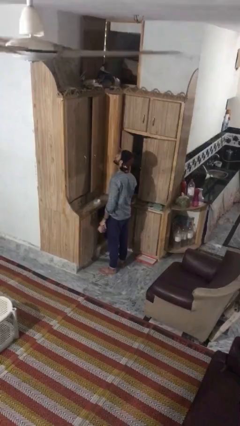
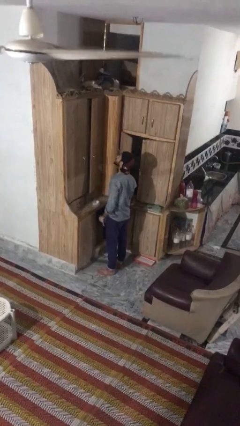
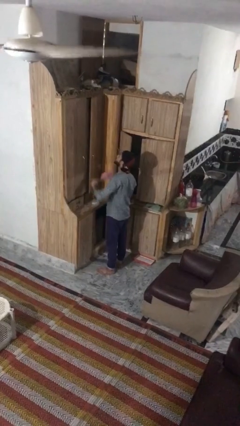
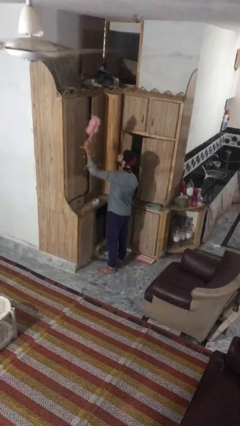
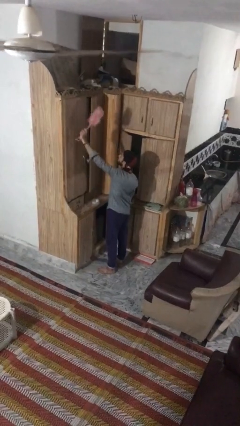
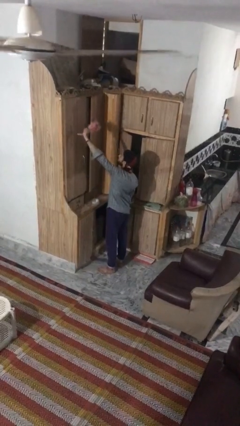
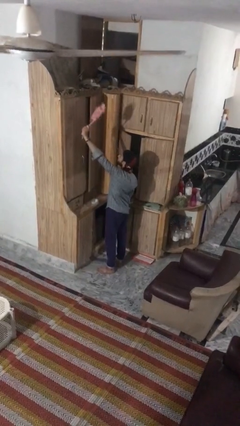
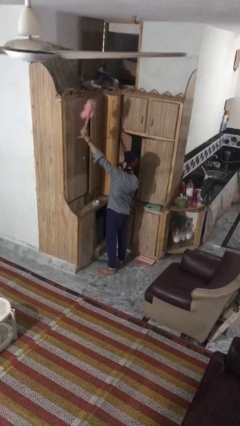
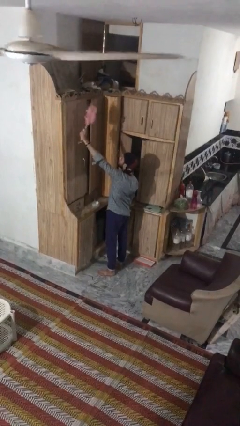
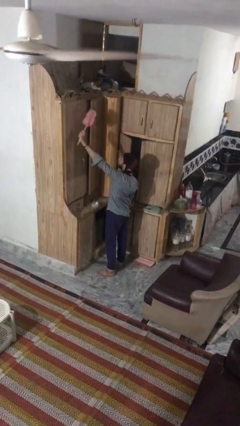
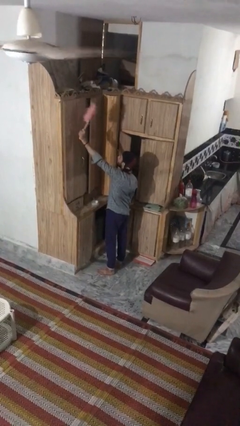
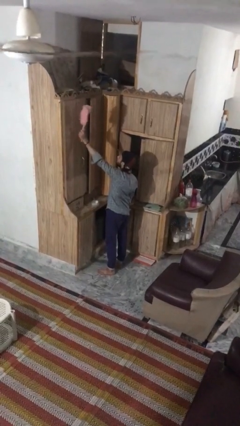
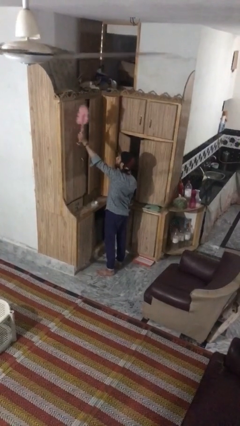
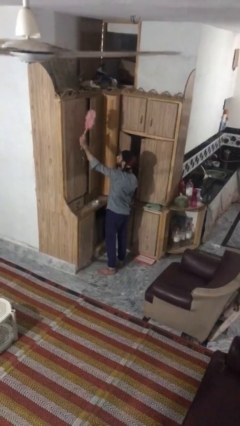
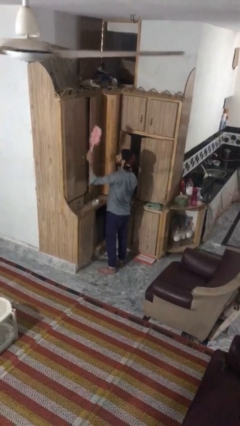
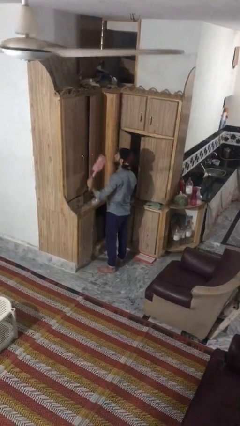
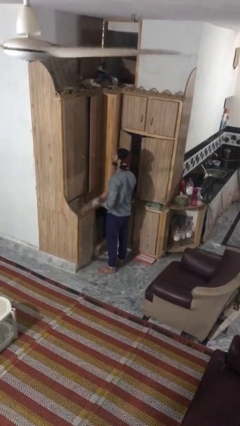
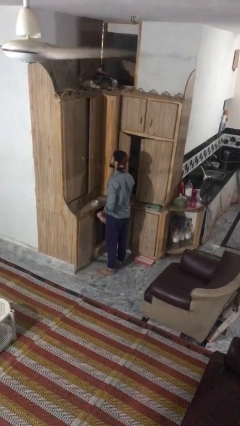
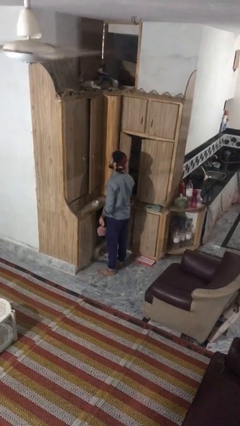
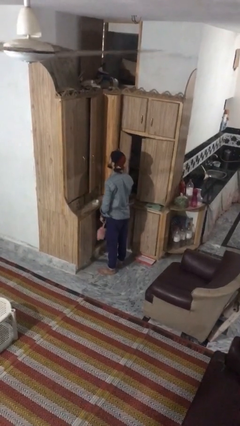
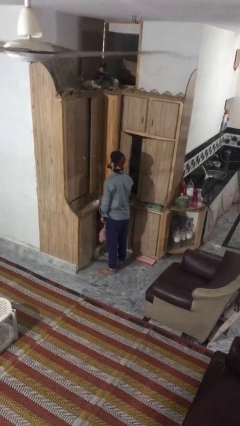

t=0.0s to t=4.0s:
person dusts furniture

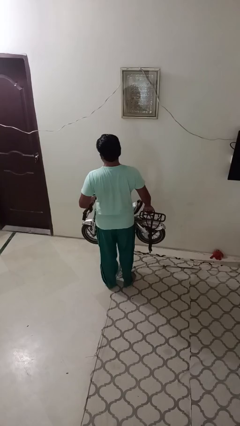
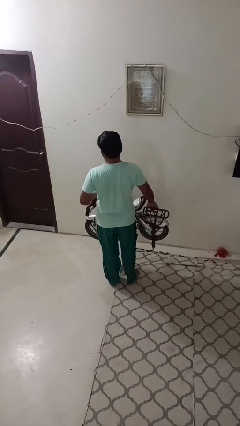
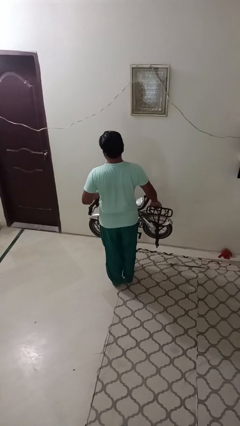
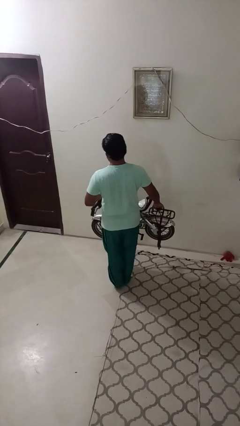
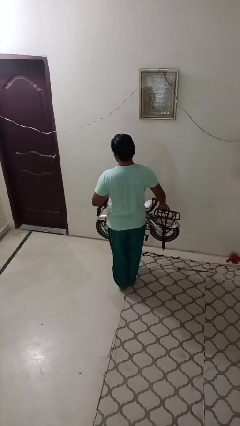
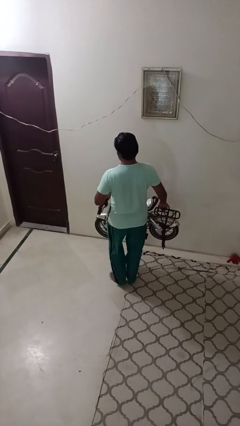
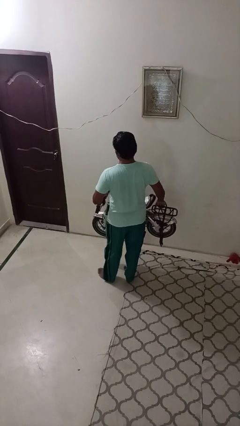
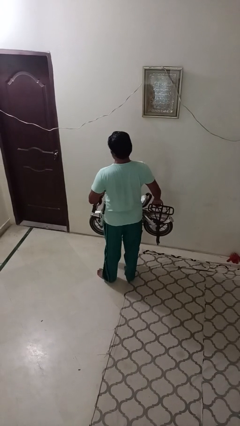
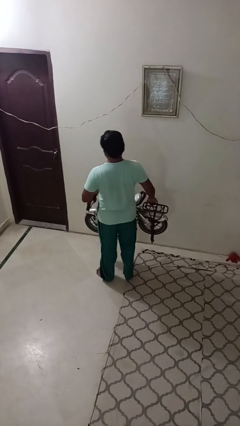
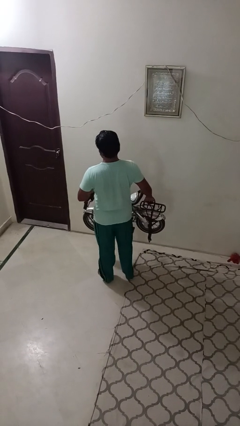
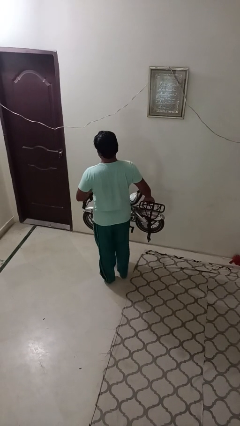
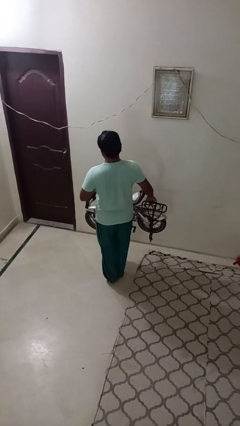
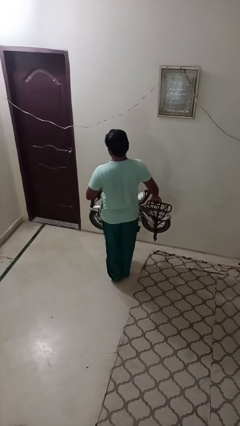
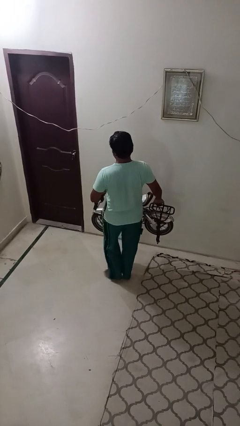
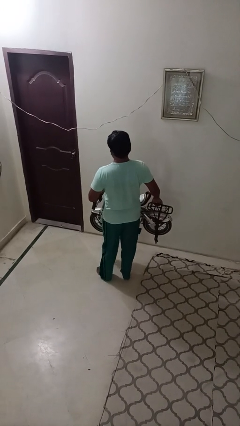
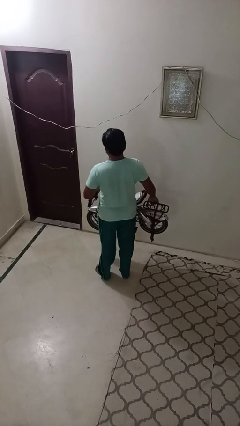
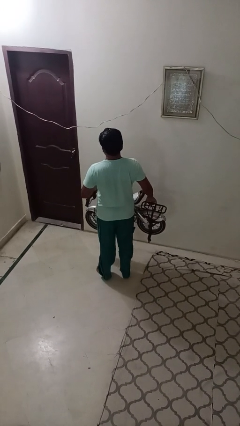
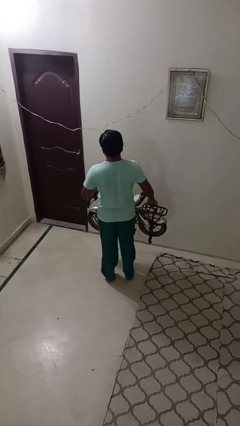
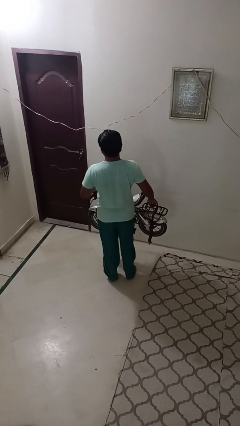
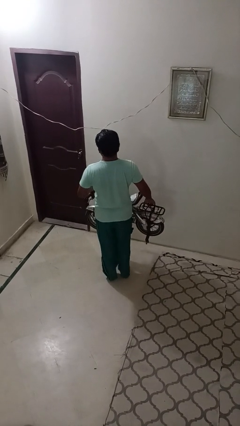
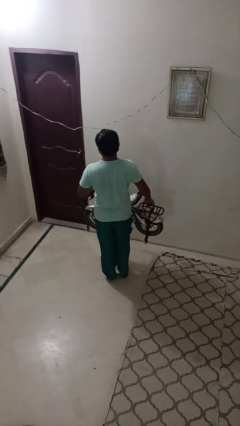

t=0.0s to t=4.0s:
person carries bicycle

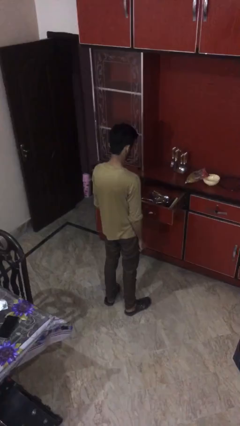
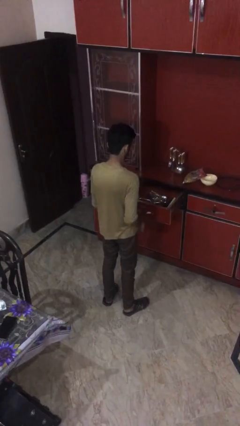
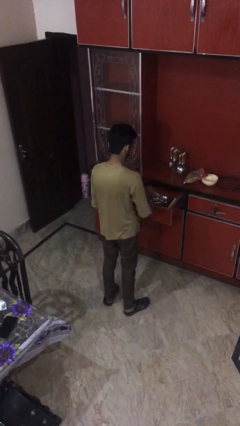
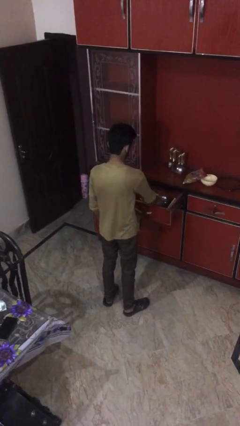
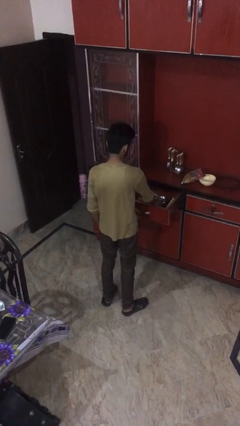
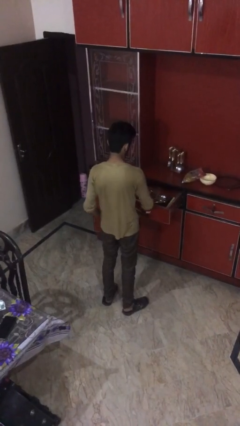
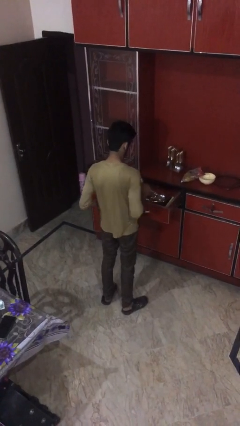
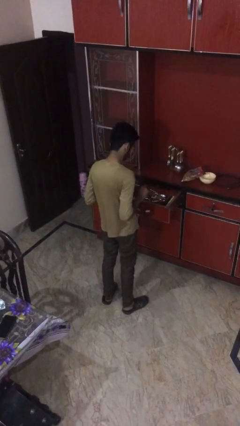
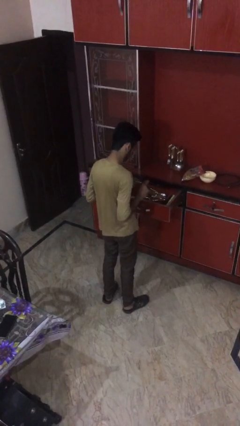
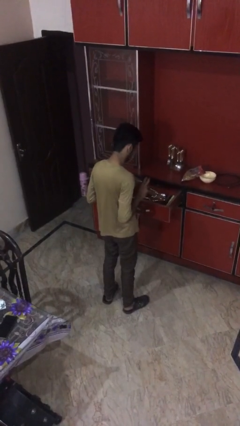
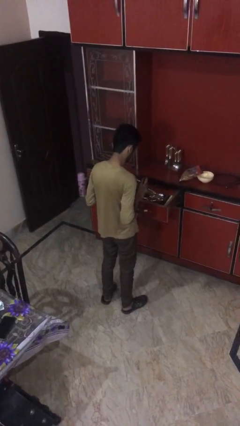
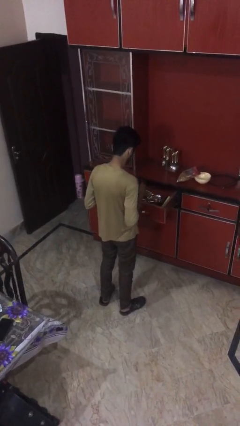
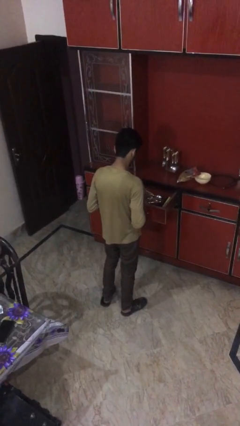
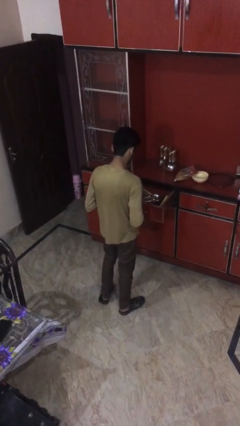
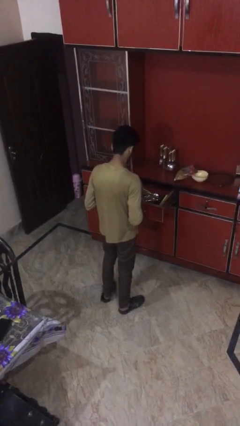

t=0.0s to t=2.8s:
person takes object from kitchen drawer

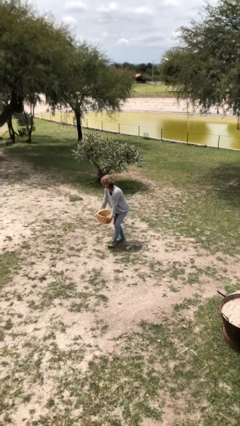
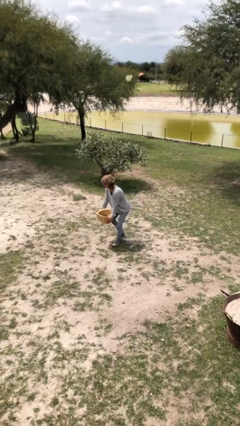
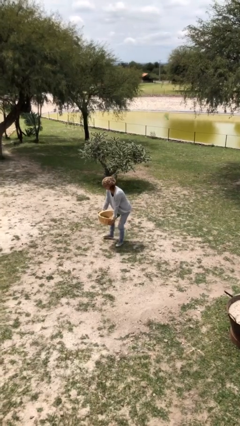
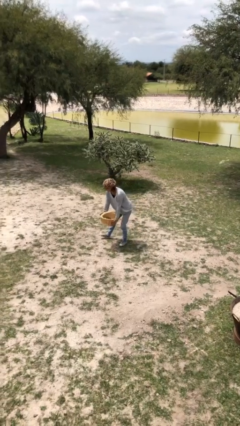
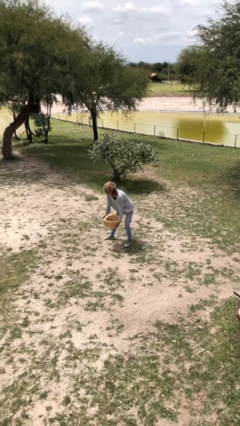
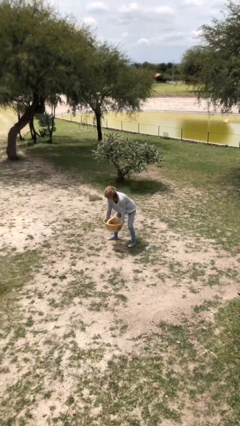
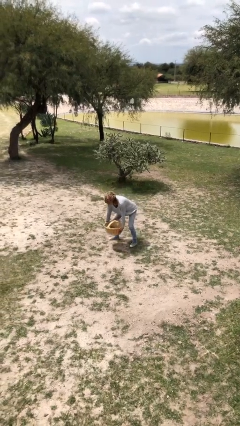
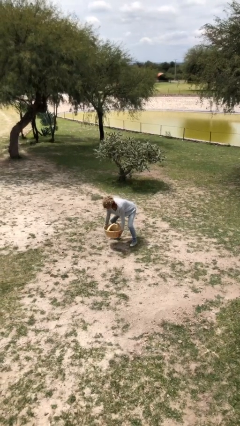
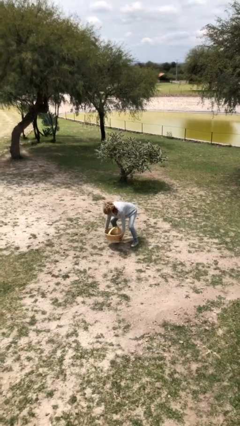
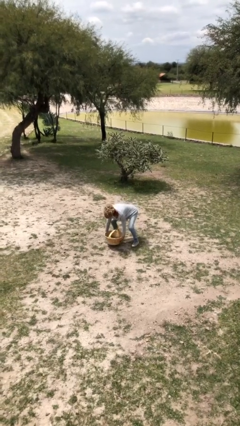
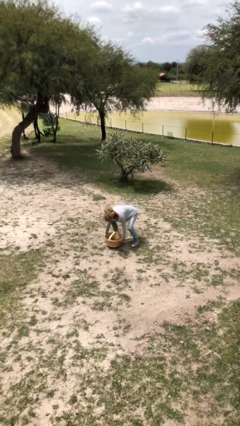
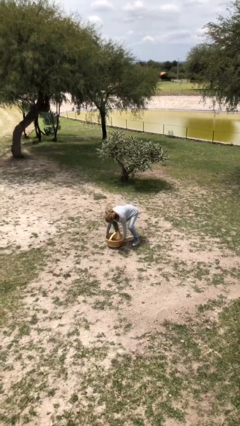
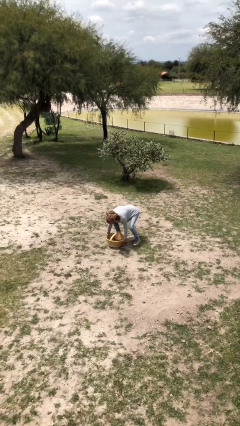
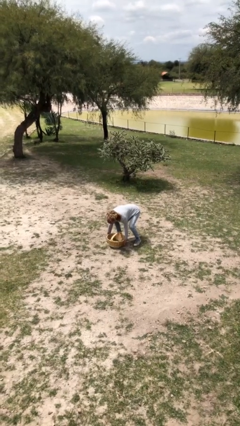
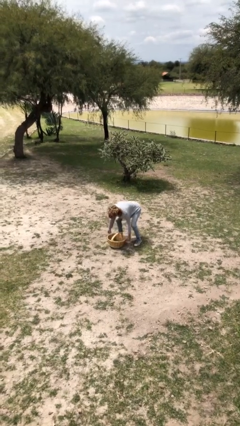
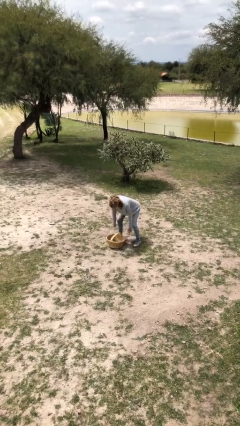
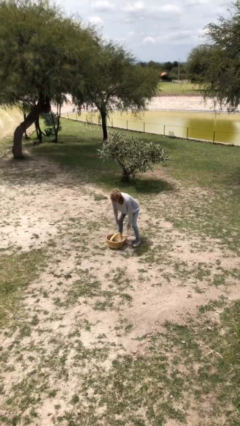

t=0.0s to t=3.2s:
person puts down object on floor

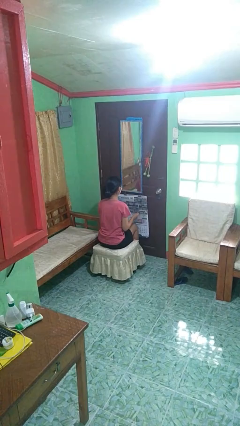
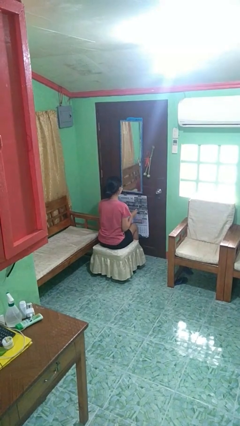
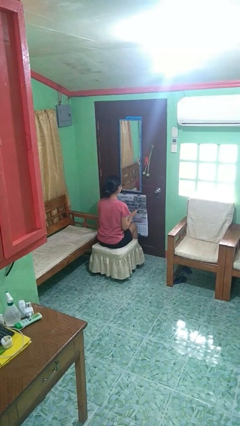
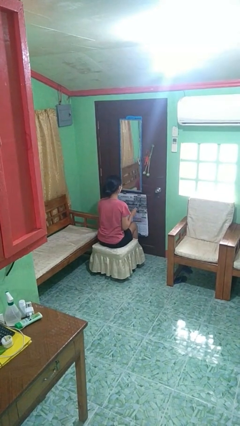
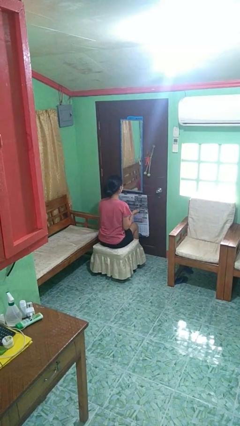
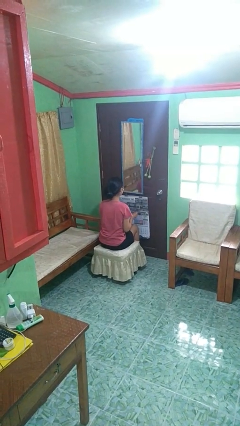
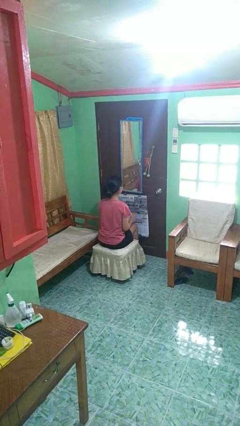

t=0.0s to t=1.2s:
person snaps fingers

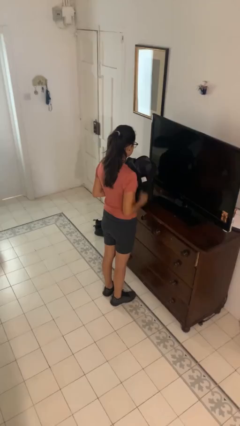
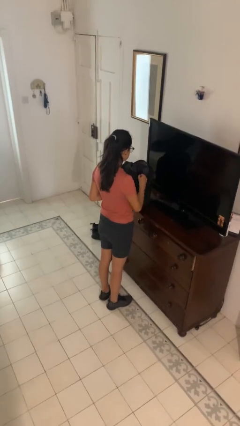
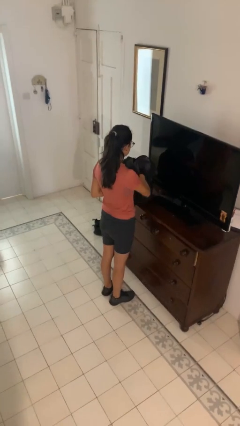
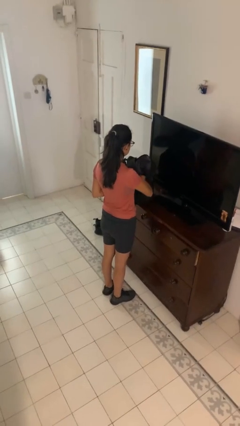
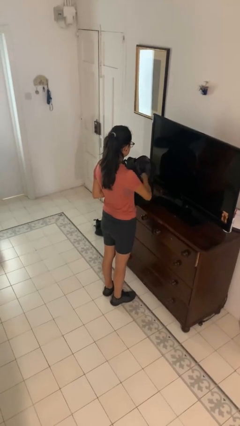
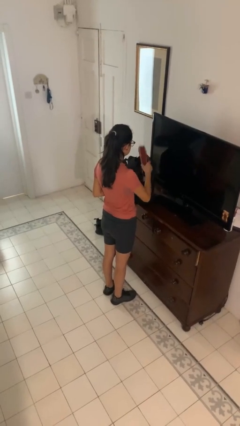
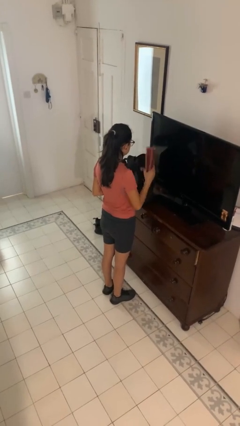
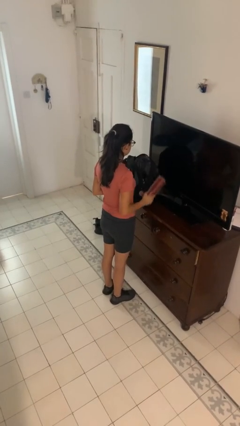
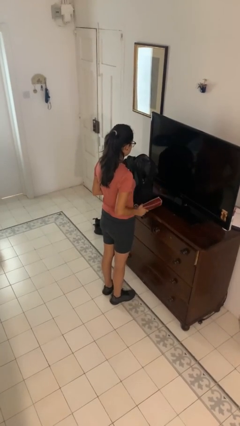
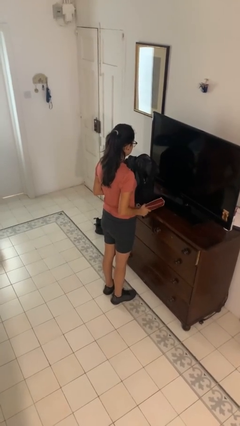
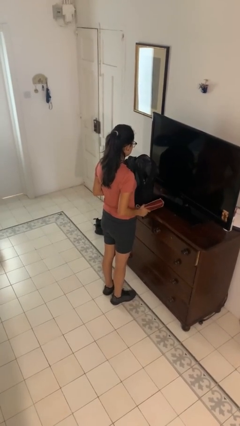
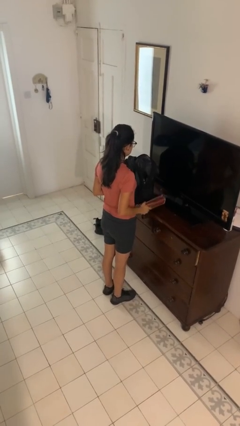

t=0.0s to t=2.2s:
person takes object from bag
